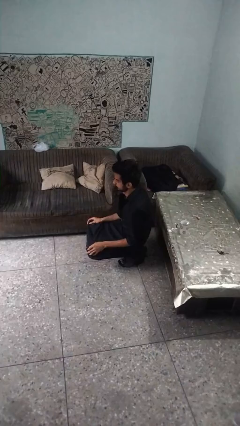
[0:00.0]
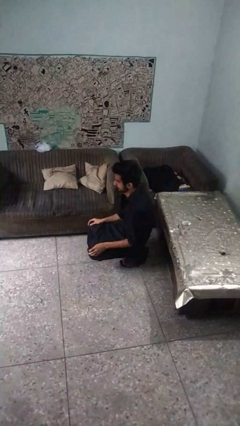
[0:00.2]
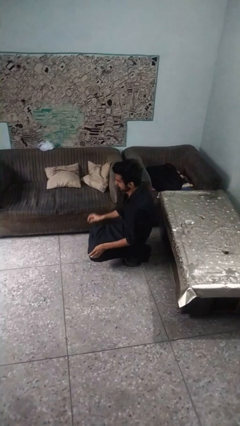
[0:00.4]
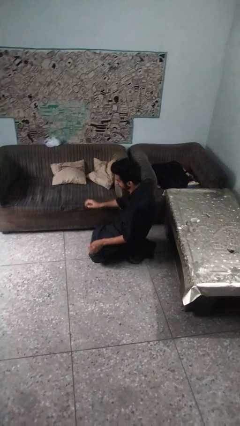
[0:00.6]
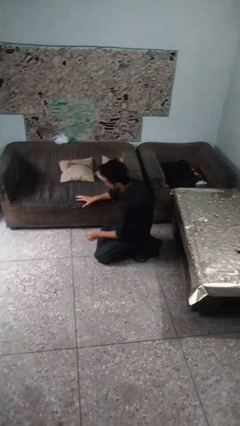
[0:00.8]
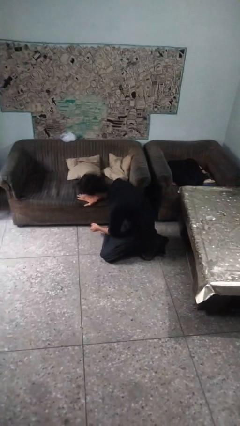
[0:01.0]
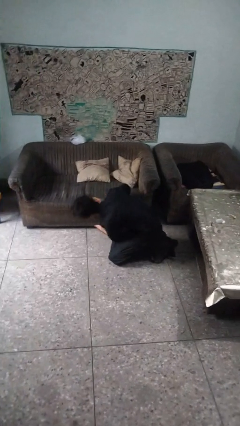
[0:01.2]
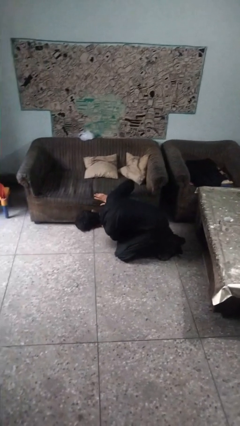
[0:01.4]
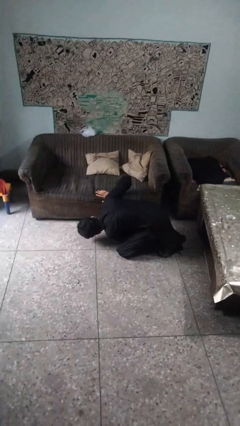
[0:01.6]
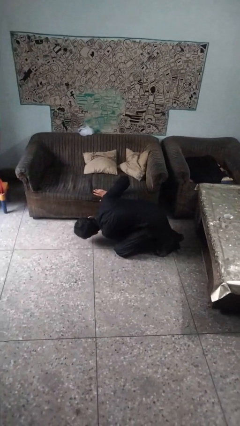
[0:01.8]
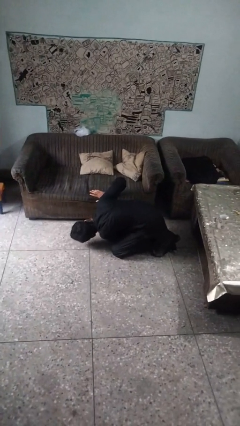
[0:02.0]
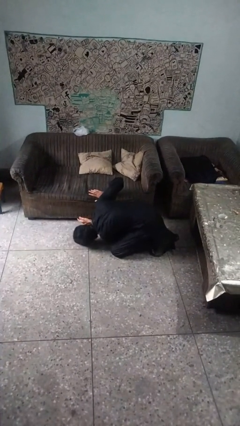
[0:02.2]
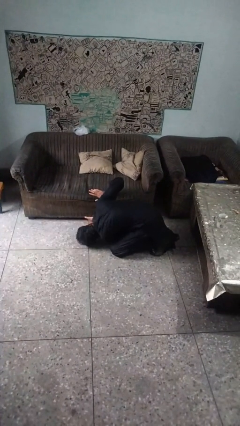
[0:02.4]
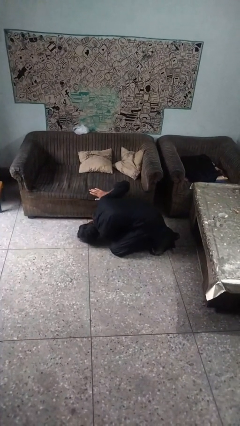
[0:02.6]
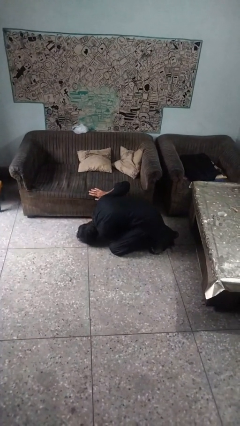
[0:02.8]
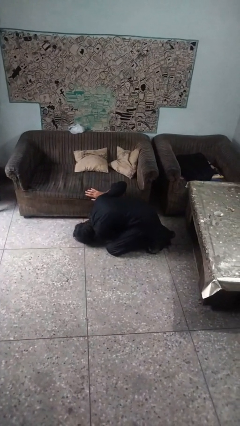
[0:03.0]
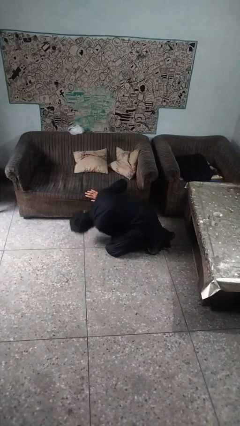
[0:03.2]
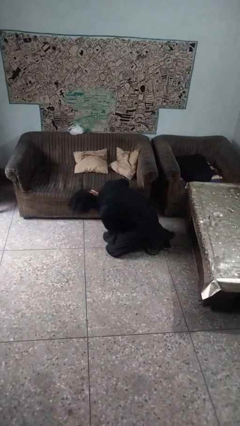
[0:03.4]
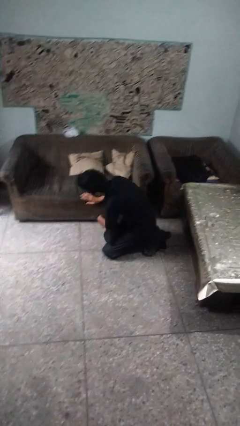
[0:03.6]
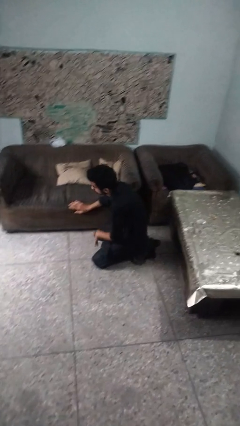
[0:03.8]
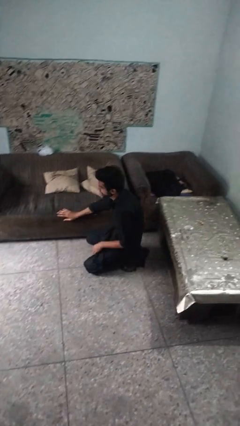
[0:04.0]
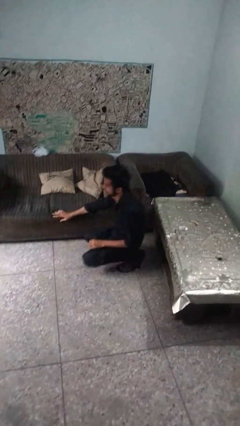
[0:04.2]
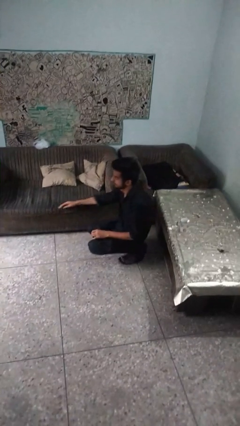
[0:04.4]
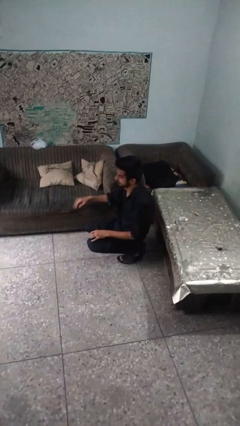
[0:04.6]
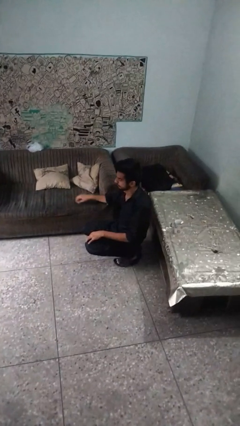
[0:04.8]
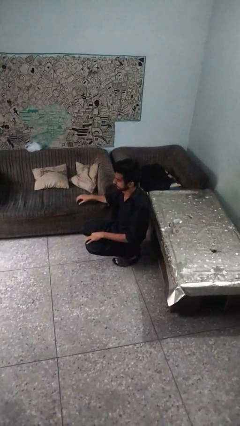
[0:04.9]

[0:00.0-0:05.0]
person searches under couch

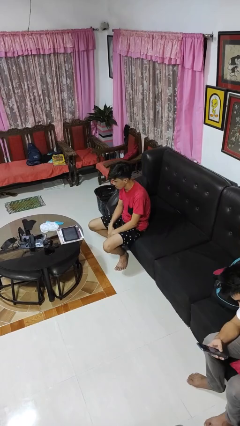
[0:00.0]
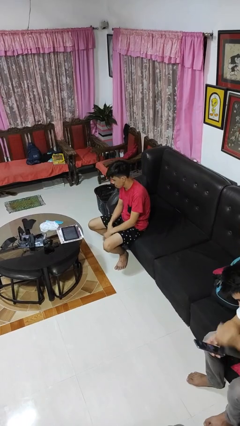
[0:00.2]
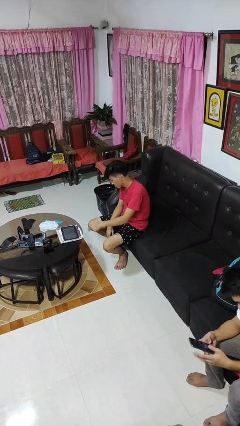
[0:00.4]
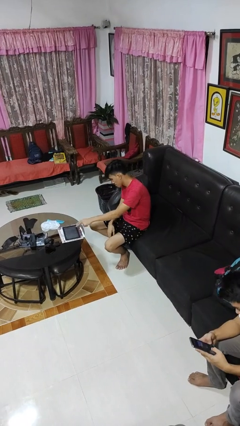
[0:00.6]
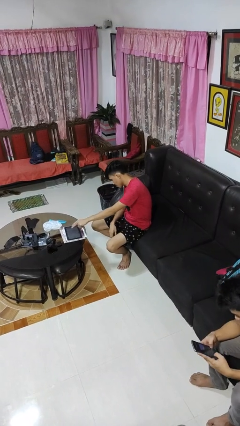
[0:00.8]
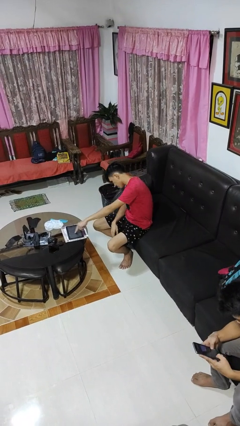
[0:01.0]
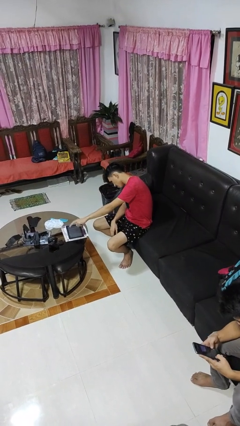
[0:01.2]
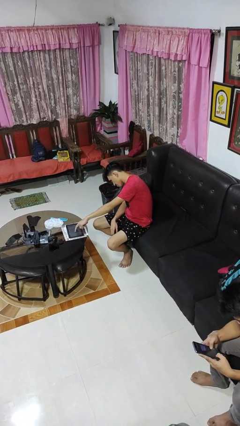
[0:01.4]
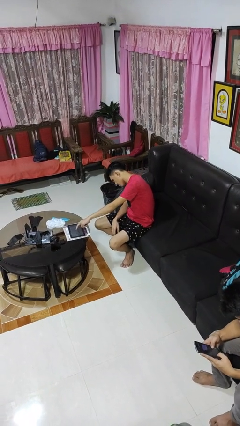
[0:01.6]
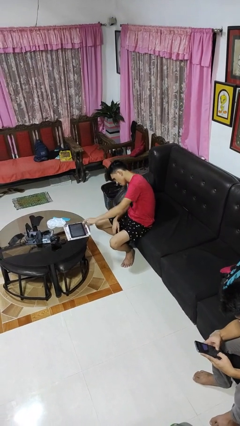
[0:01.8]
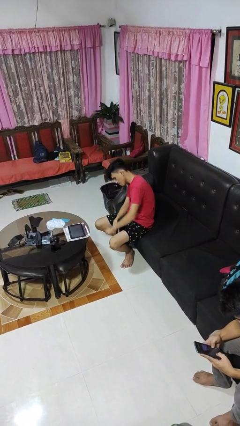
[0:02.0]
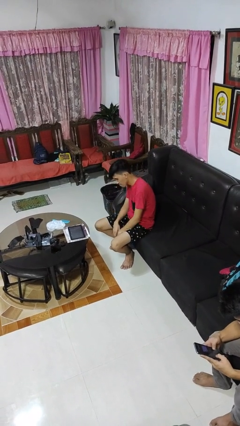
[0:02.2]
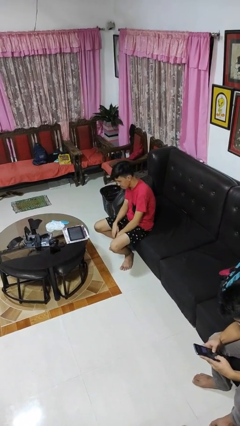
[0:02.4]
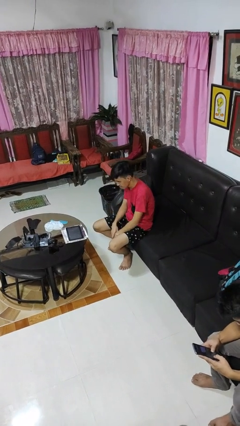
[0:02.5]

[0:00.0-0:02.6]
person taps object with finger

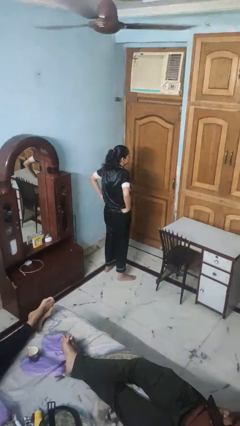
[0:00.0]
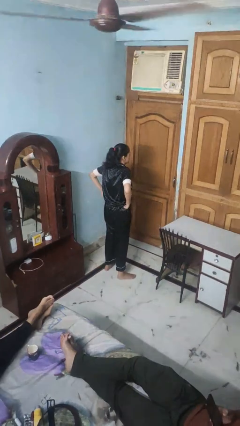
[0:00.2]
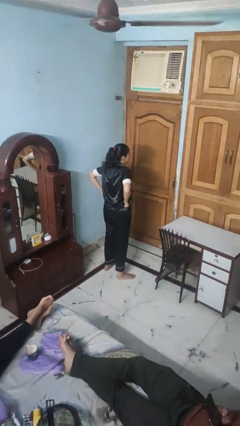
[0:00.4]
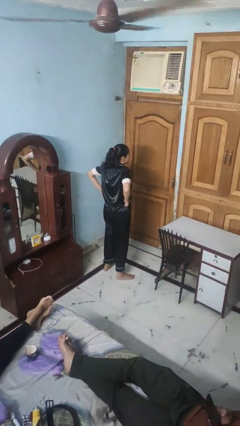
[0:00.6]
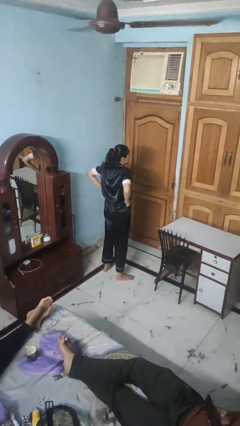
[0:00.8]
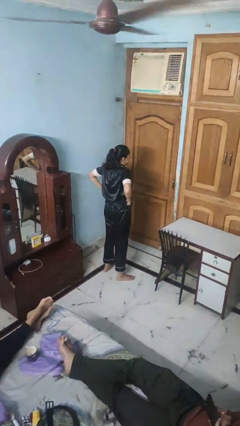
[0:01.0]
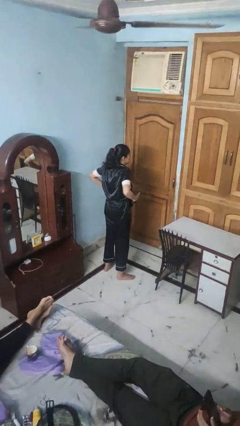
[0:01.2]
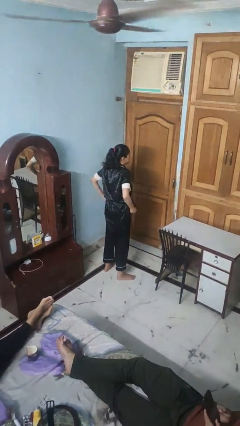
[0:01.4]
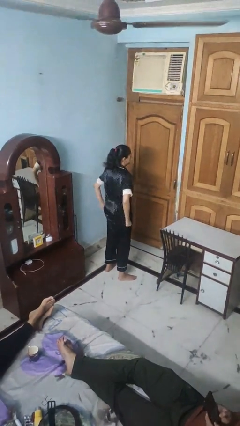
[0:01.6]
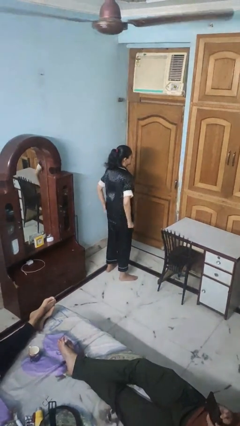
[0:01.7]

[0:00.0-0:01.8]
person hikes up pants

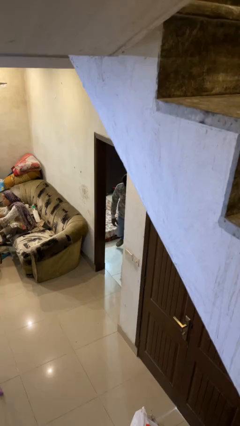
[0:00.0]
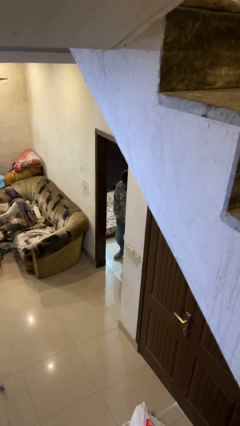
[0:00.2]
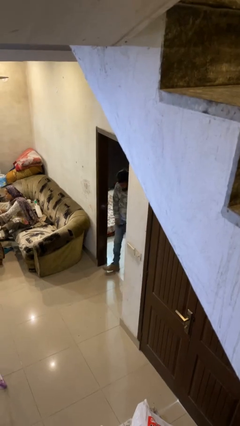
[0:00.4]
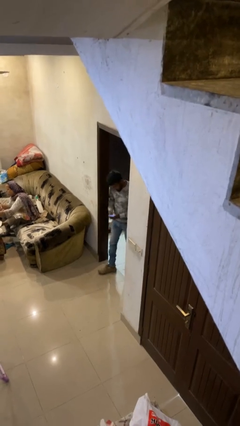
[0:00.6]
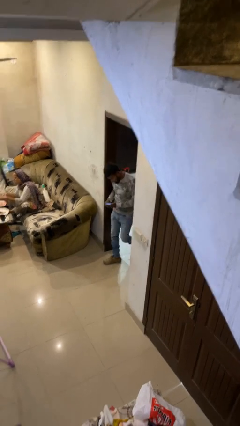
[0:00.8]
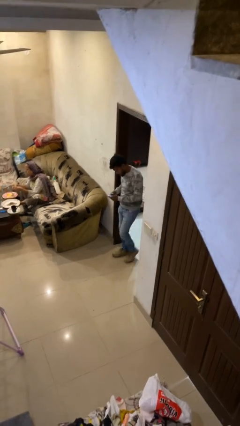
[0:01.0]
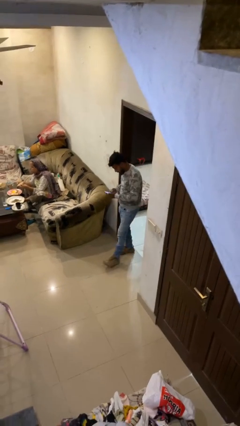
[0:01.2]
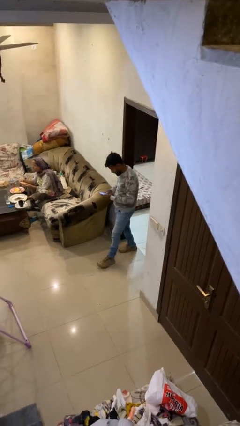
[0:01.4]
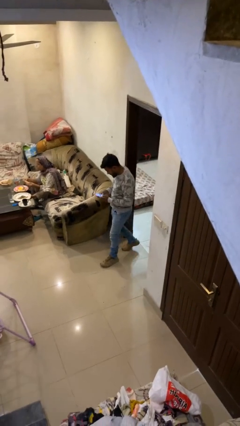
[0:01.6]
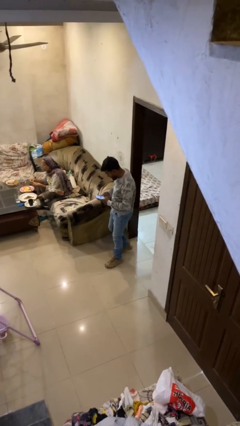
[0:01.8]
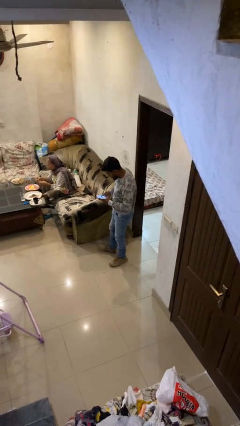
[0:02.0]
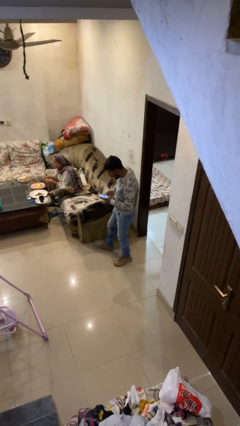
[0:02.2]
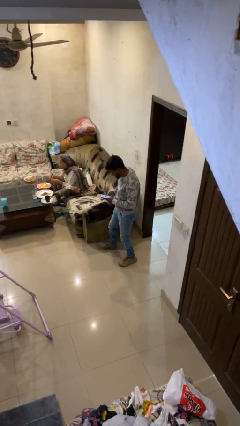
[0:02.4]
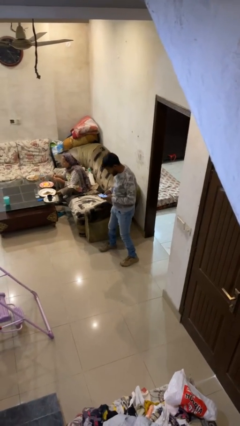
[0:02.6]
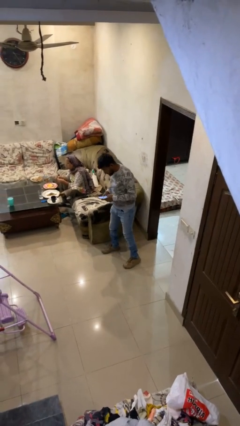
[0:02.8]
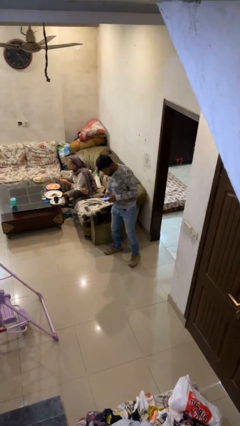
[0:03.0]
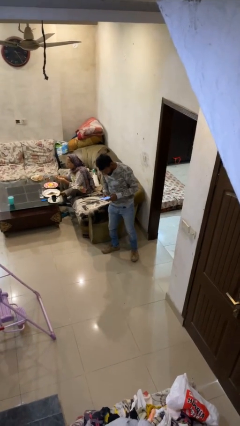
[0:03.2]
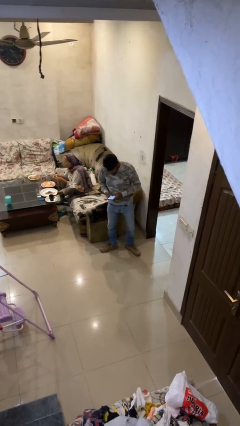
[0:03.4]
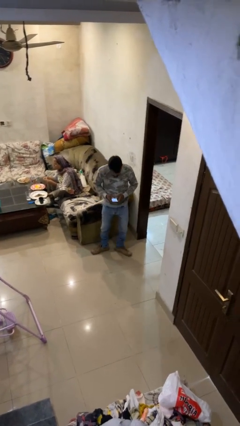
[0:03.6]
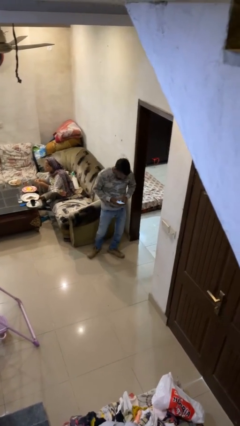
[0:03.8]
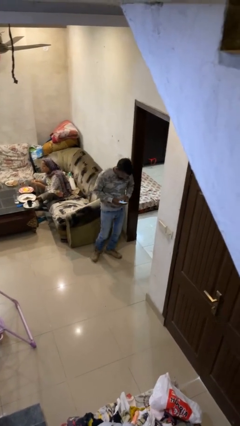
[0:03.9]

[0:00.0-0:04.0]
person enters scene through structure
